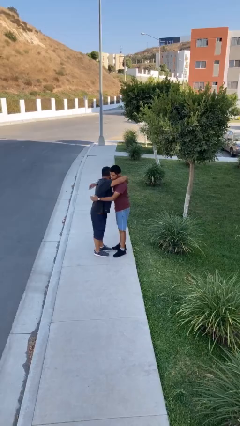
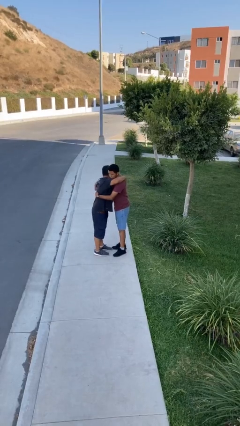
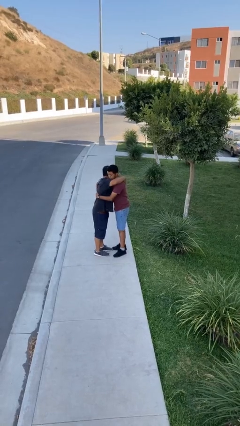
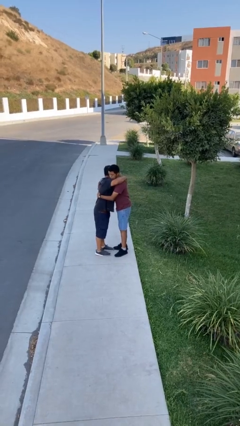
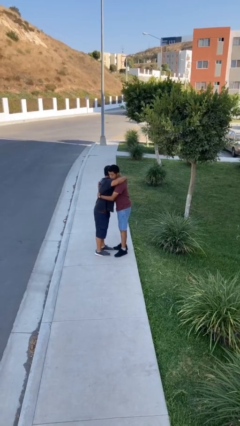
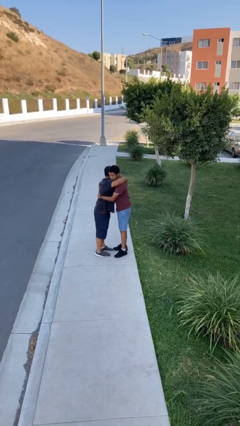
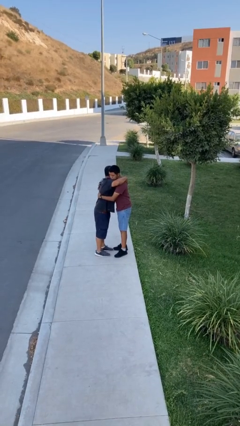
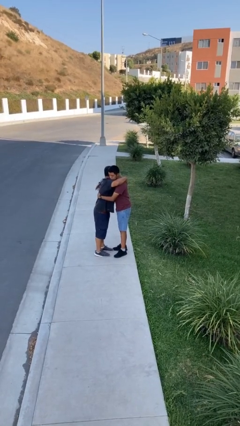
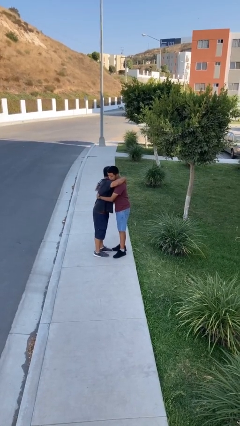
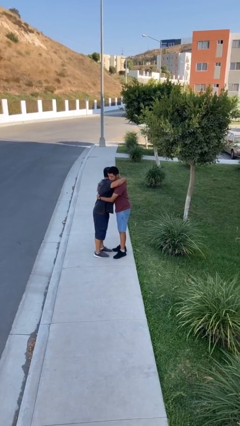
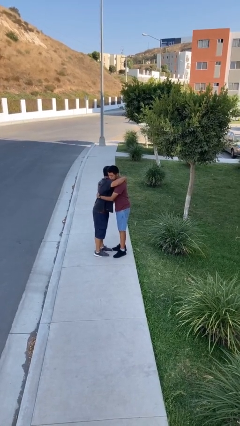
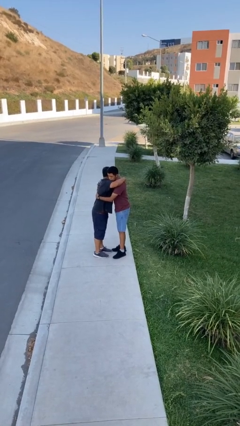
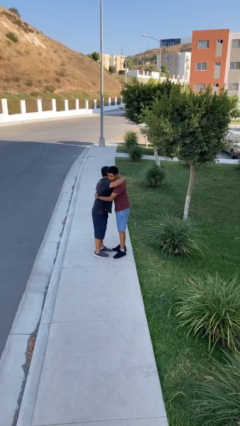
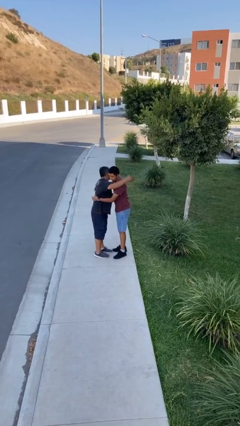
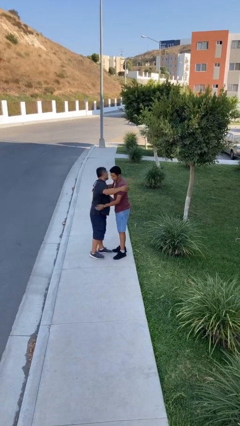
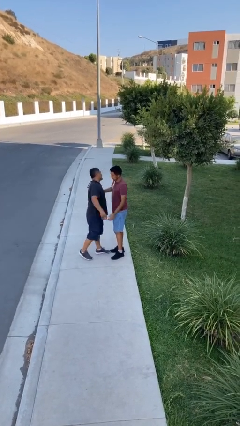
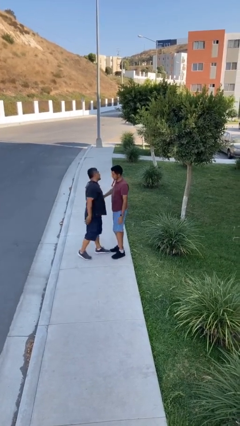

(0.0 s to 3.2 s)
person embraces person

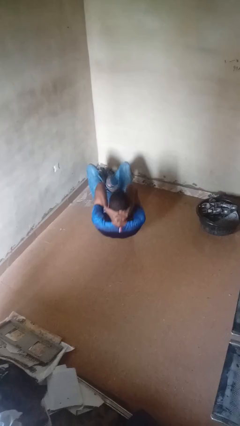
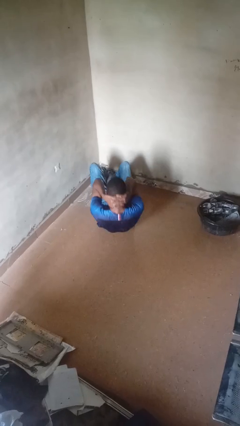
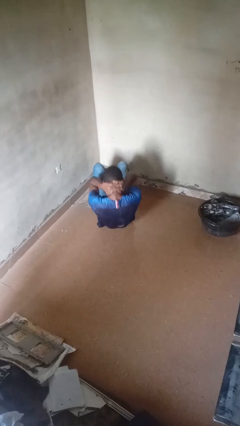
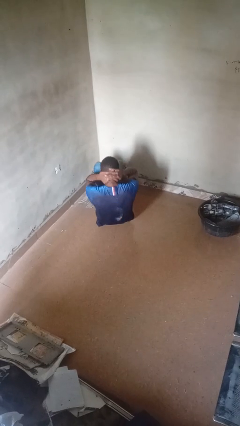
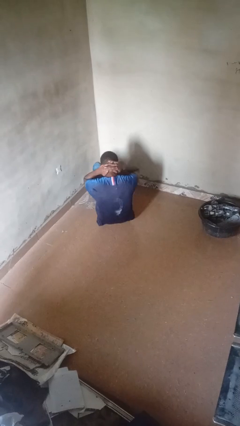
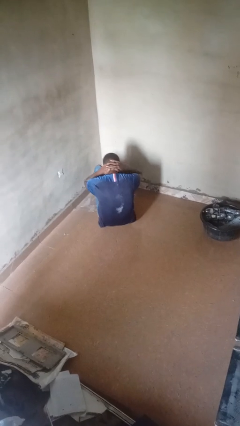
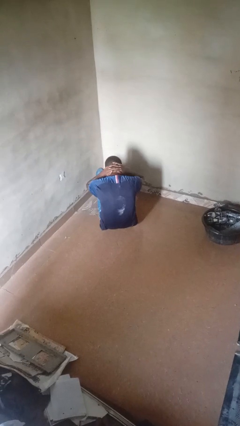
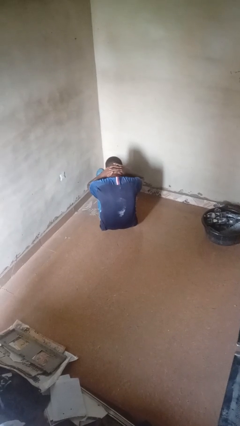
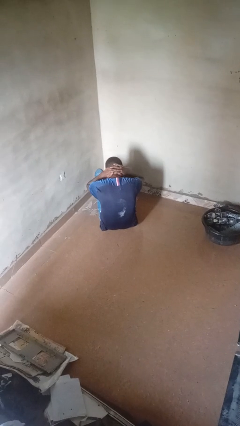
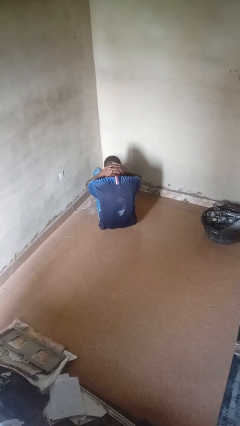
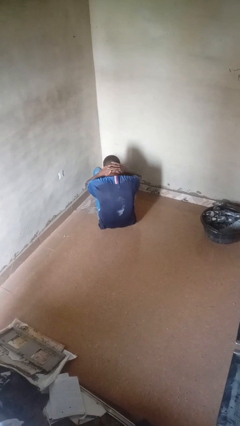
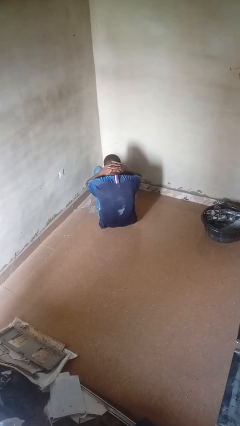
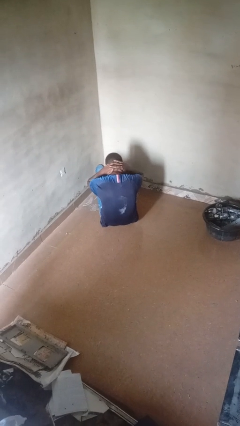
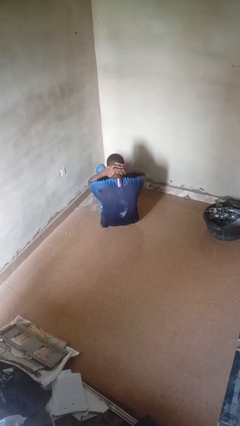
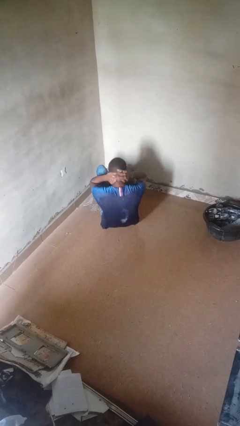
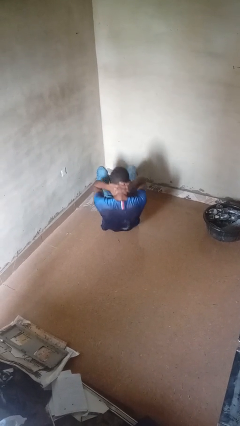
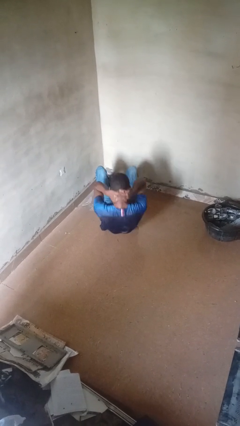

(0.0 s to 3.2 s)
person exercises with situp

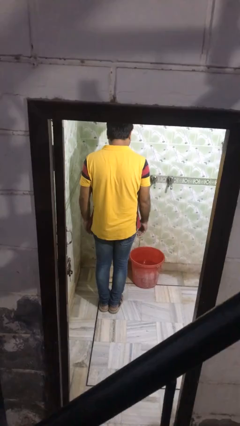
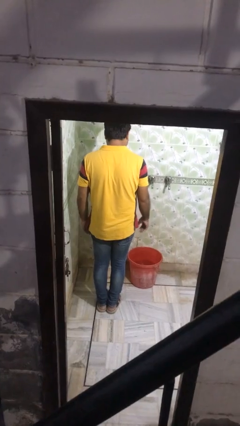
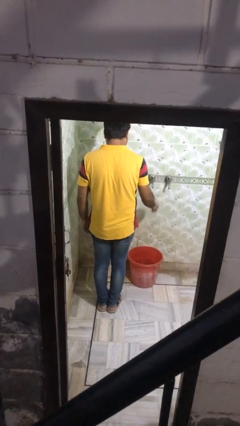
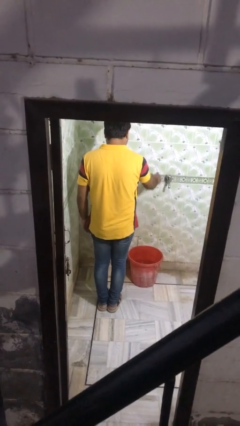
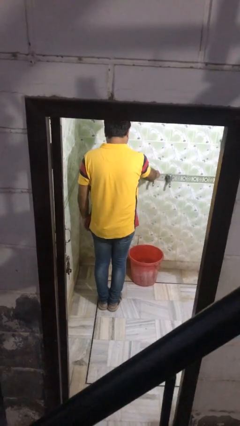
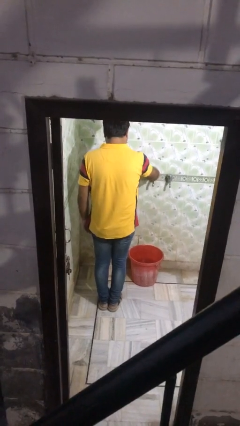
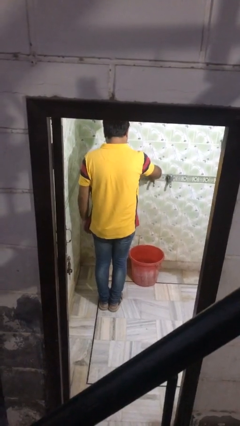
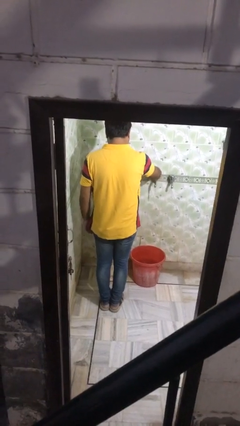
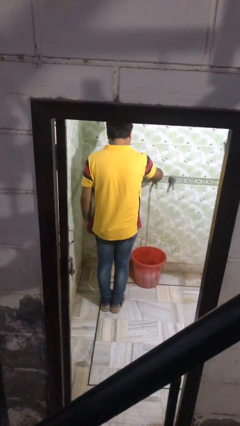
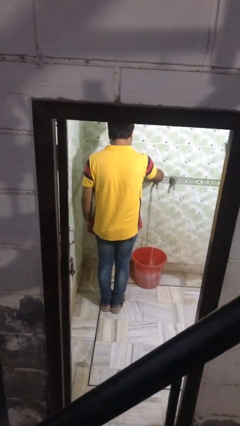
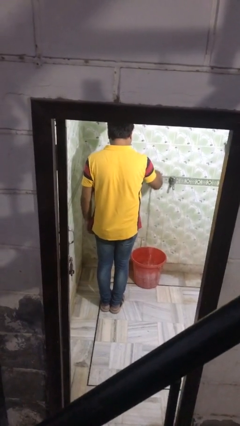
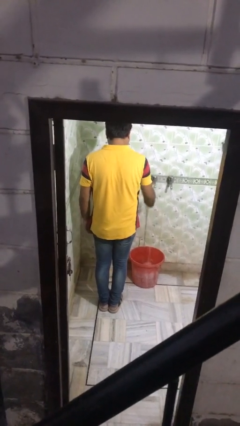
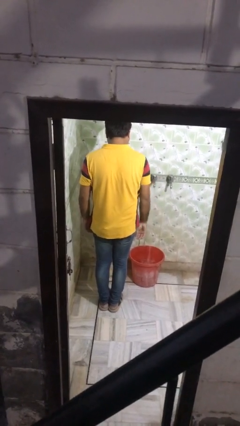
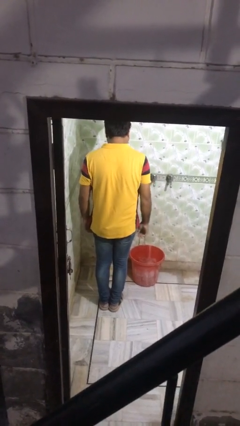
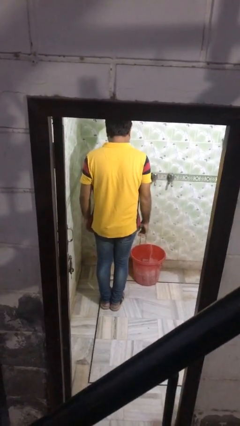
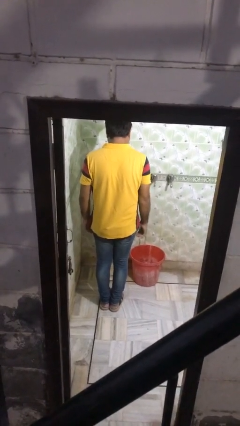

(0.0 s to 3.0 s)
person turns on faucet

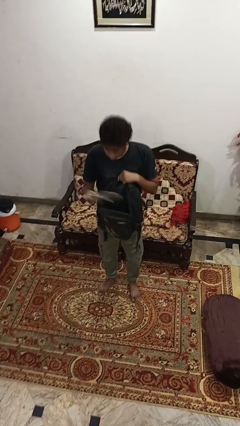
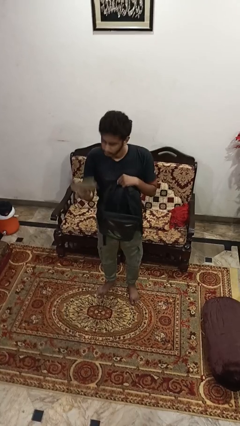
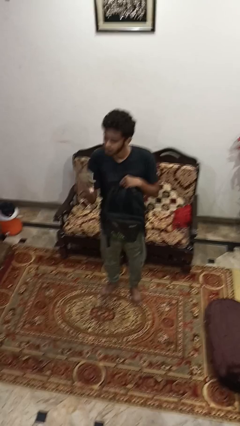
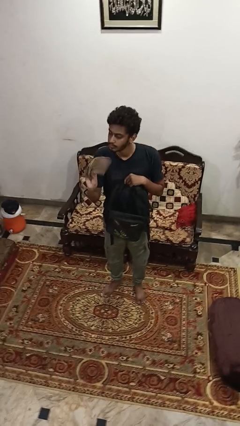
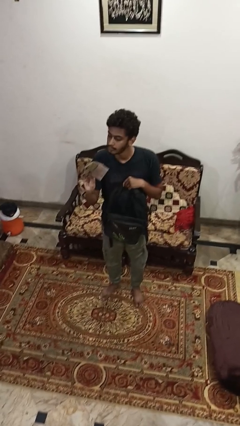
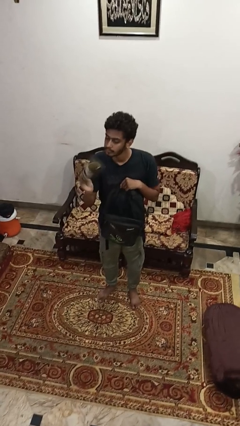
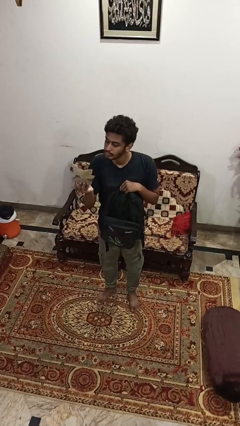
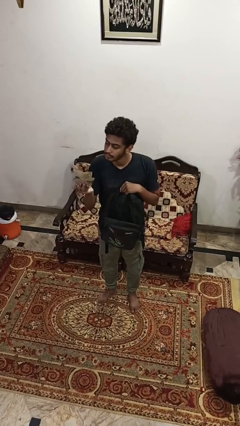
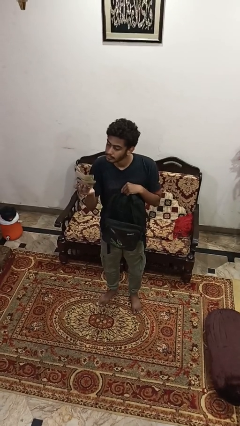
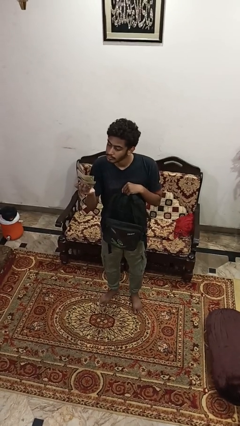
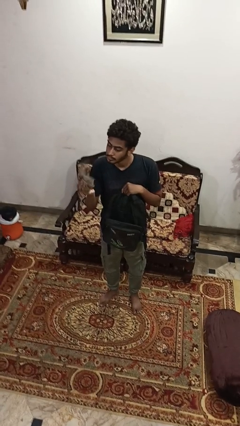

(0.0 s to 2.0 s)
person takes object from backpack

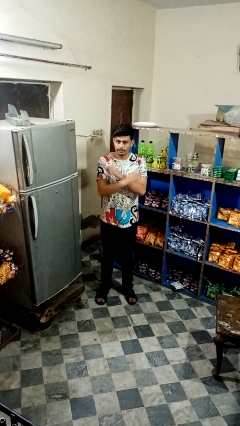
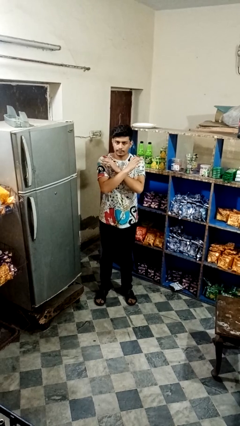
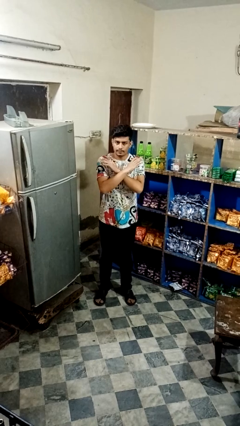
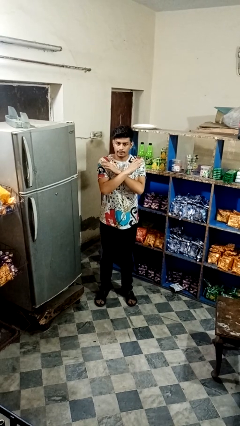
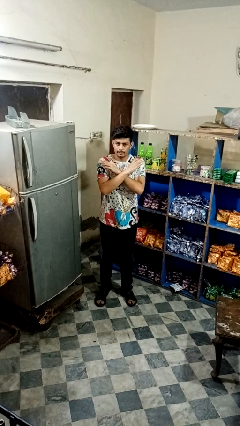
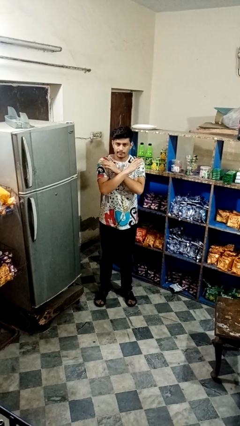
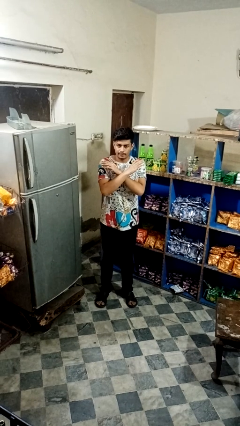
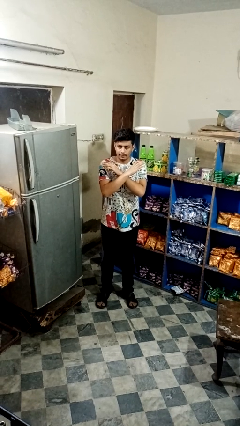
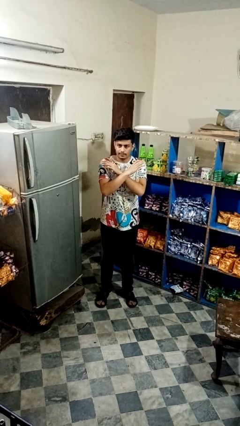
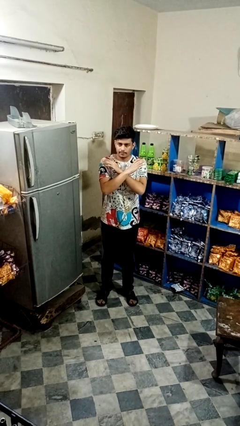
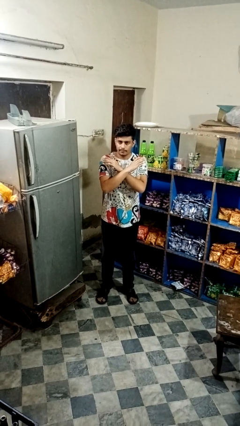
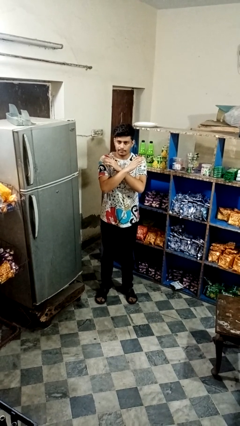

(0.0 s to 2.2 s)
person gestures arms x

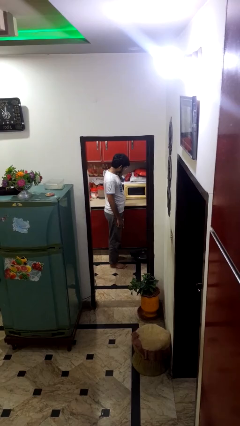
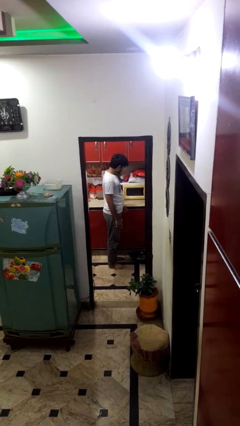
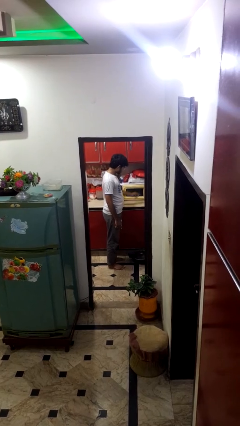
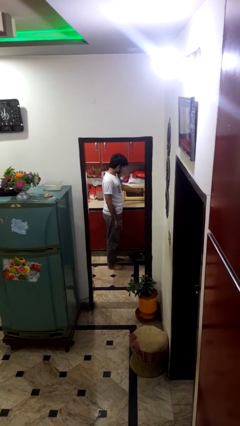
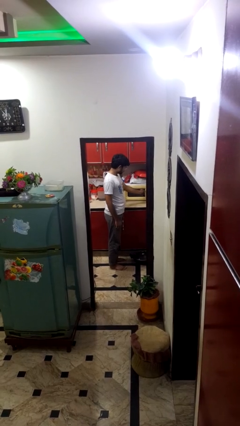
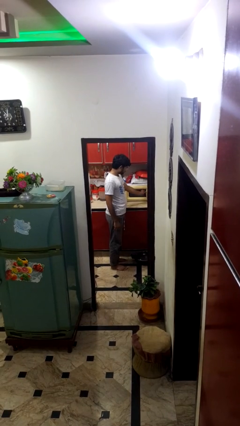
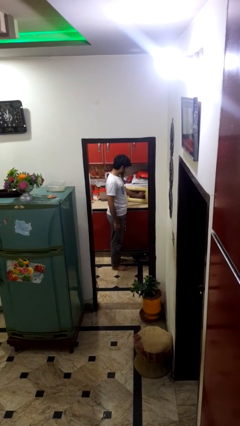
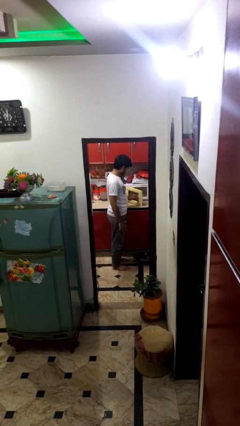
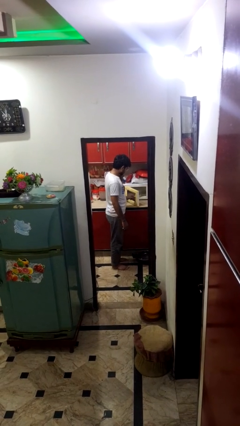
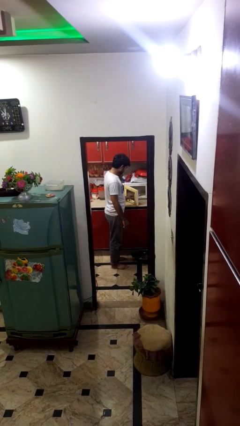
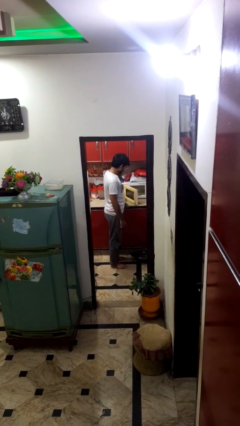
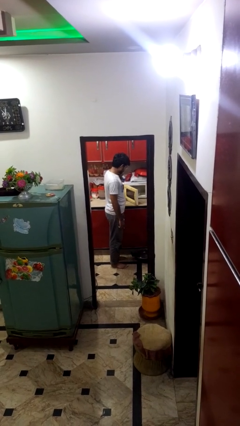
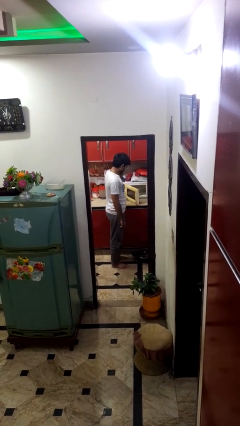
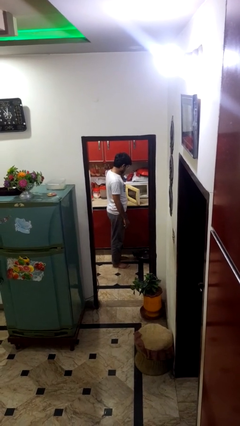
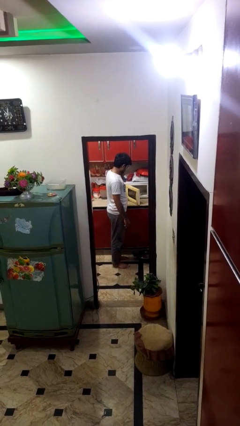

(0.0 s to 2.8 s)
person opens microwave

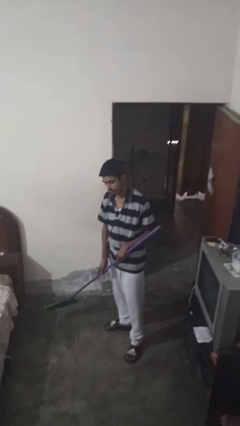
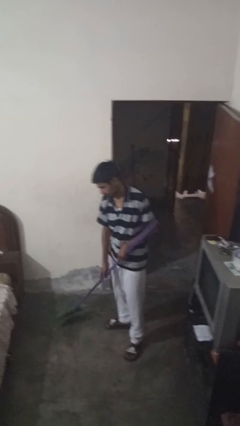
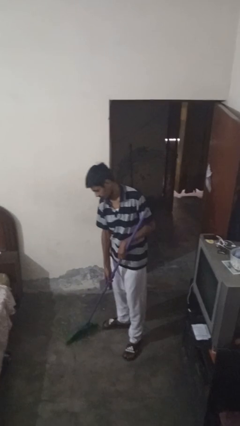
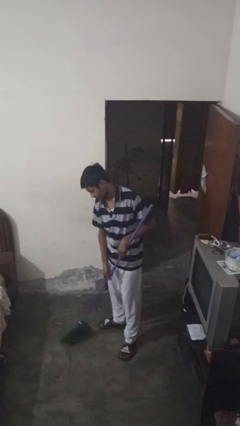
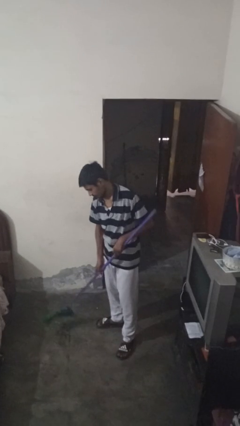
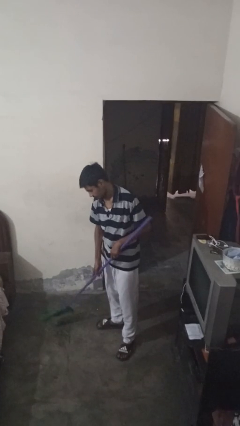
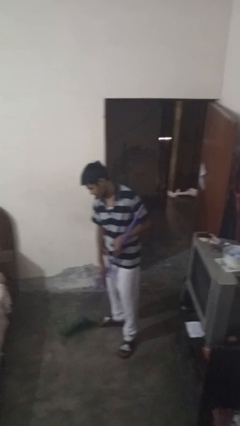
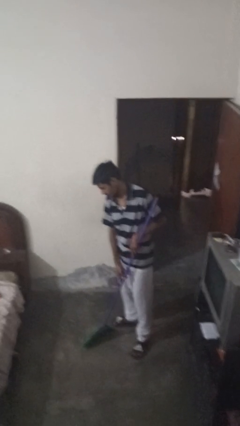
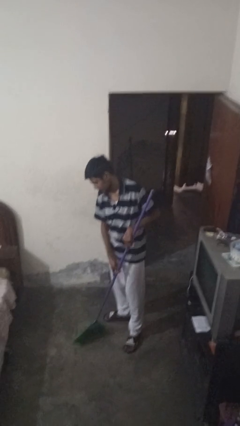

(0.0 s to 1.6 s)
person sweeps floor
